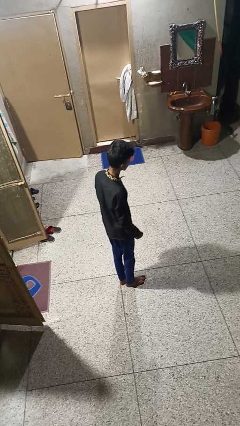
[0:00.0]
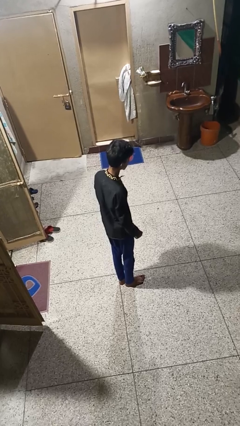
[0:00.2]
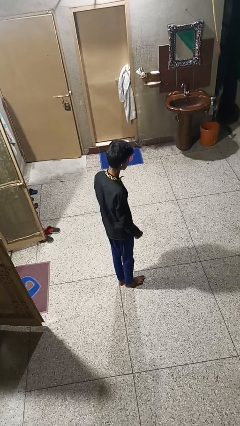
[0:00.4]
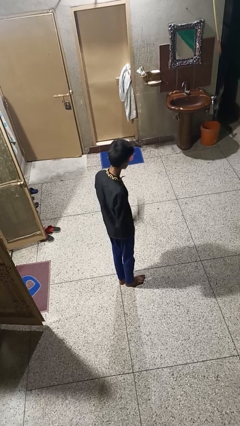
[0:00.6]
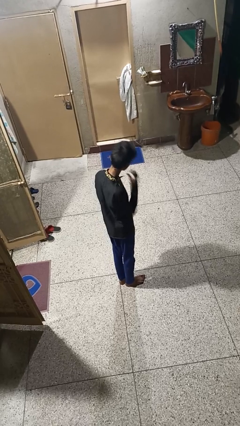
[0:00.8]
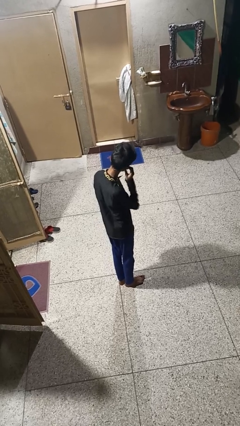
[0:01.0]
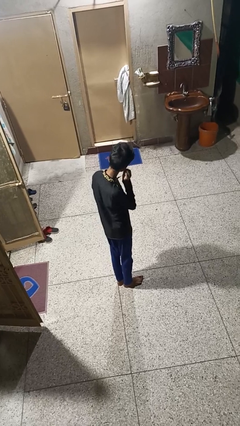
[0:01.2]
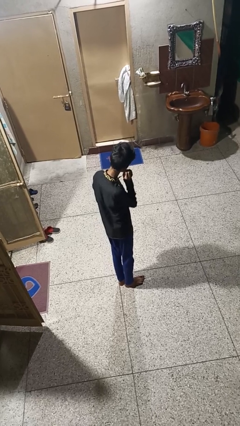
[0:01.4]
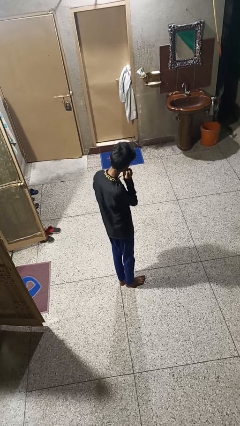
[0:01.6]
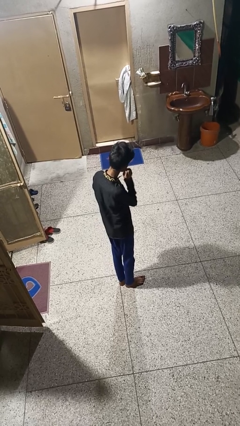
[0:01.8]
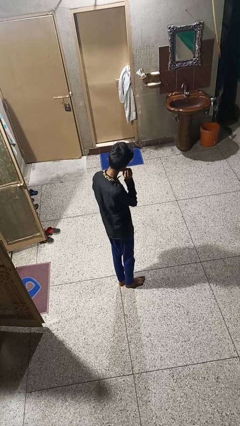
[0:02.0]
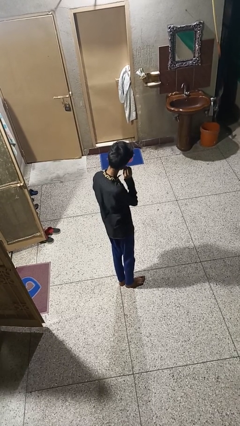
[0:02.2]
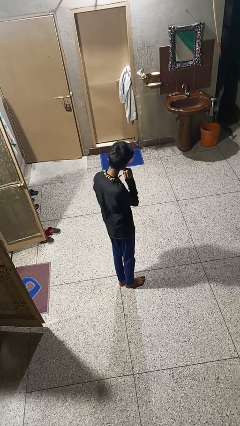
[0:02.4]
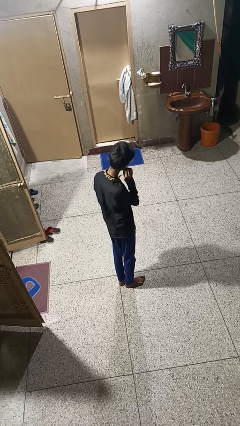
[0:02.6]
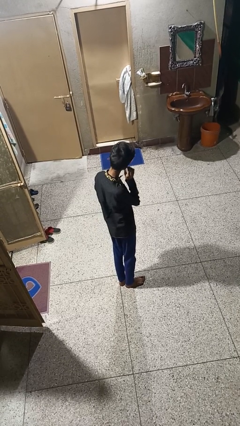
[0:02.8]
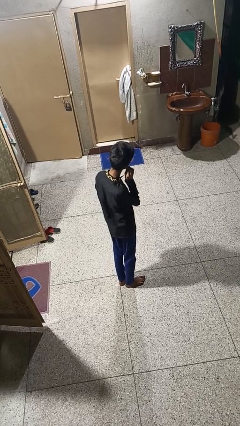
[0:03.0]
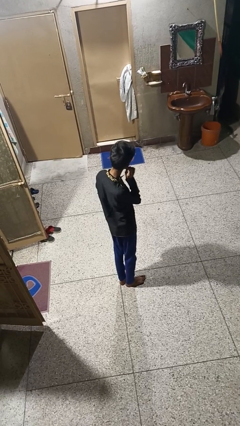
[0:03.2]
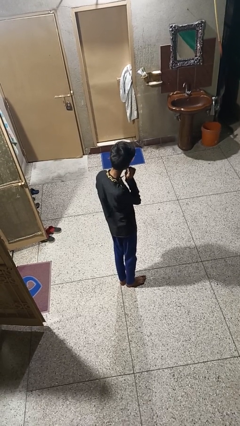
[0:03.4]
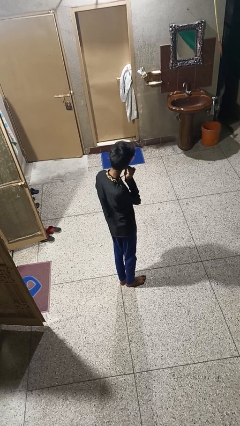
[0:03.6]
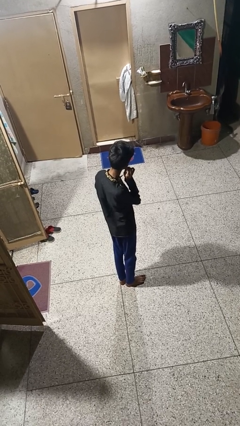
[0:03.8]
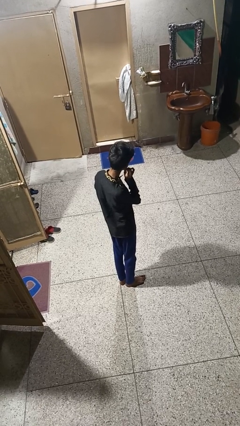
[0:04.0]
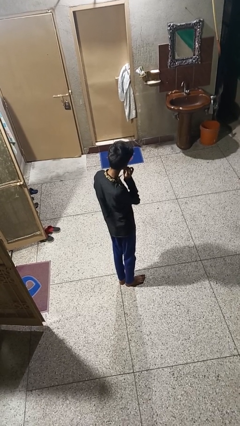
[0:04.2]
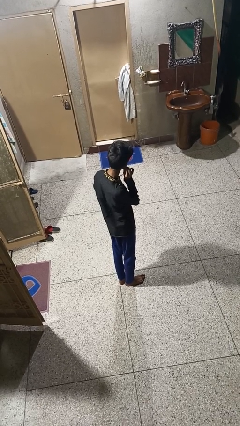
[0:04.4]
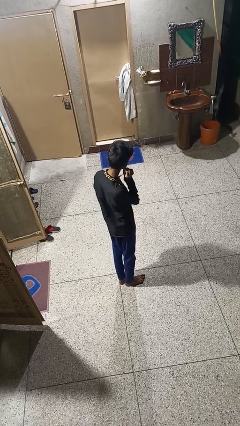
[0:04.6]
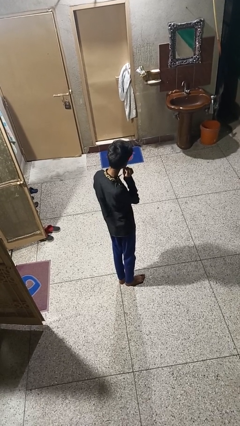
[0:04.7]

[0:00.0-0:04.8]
person touches earlobe

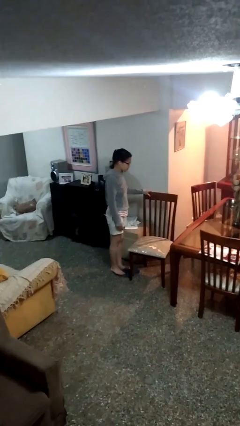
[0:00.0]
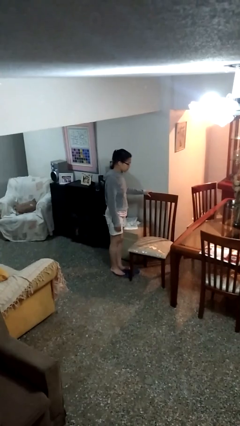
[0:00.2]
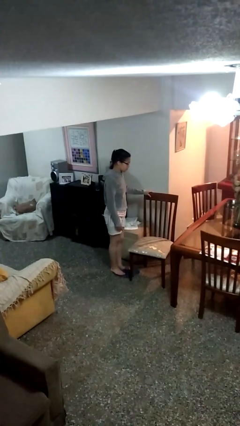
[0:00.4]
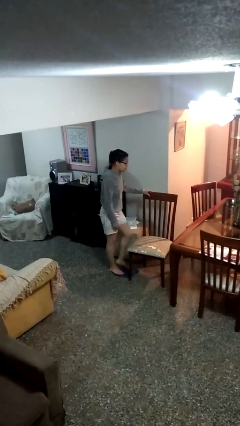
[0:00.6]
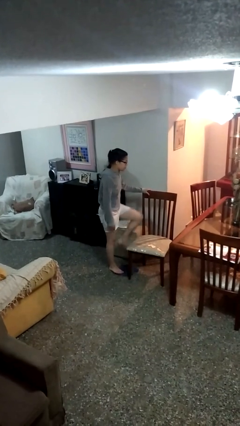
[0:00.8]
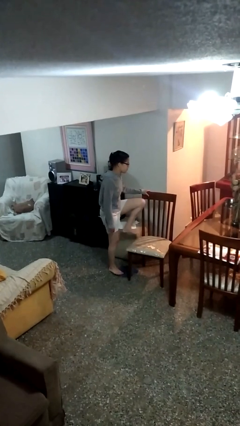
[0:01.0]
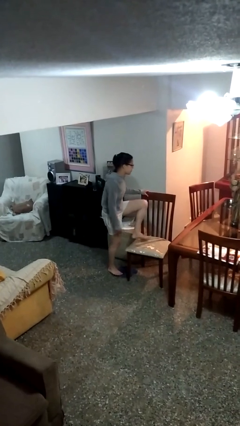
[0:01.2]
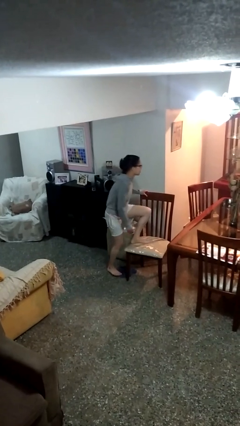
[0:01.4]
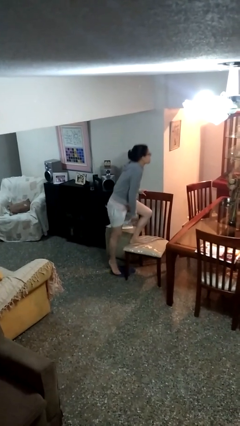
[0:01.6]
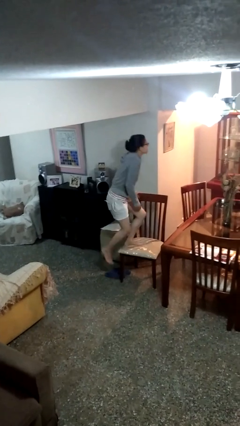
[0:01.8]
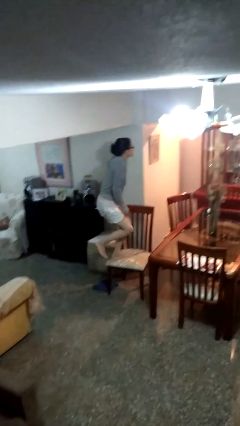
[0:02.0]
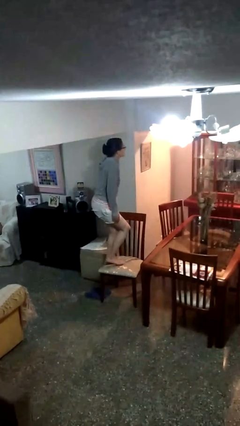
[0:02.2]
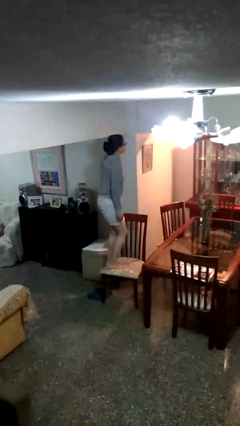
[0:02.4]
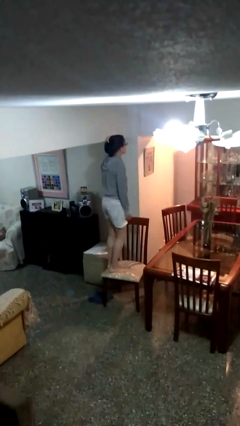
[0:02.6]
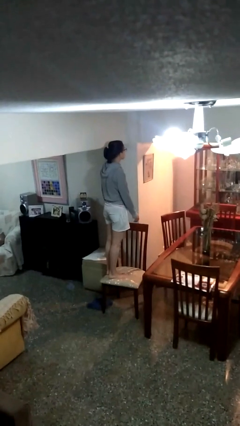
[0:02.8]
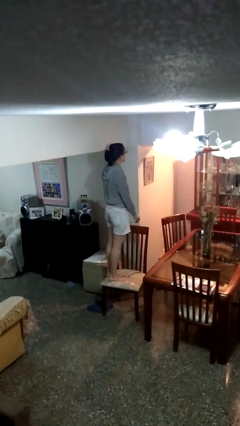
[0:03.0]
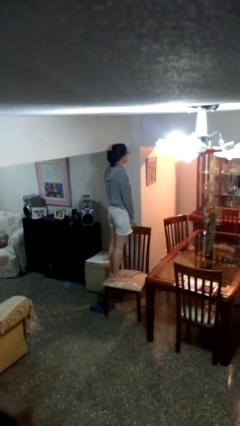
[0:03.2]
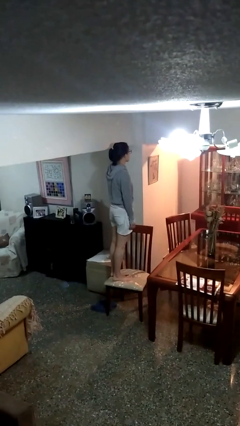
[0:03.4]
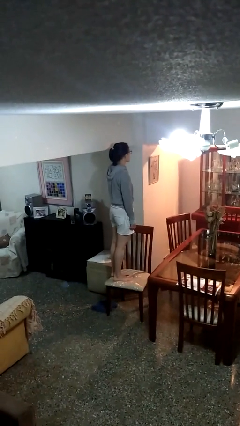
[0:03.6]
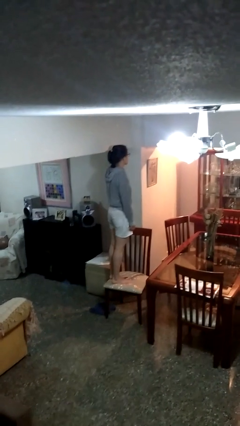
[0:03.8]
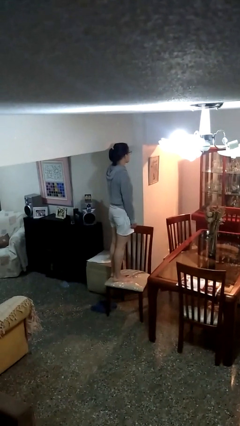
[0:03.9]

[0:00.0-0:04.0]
person climbs on chair

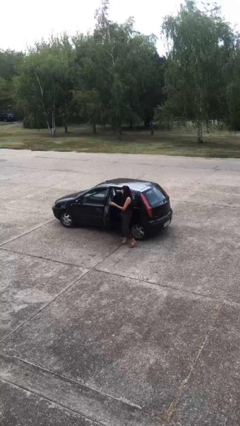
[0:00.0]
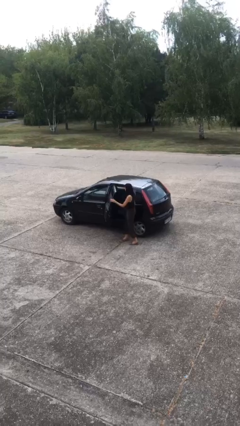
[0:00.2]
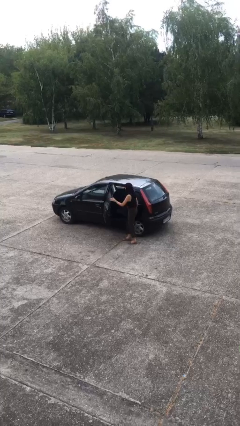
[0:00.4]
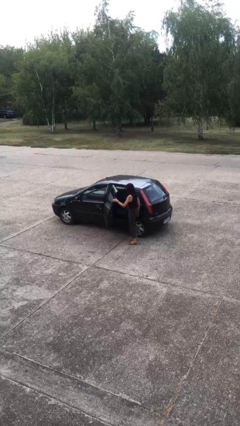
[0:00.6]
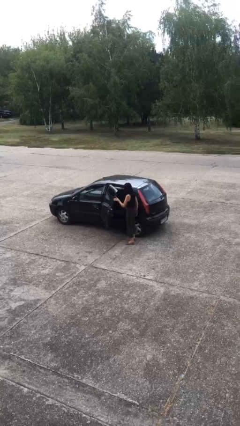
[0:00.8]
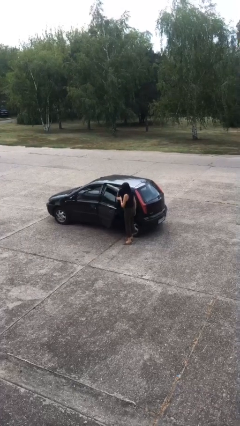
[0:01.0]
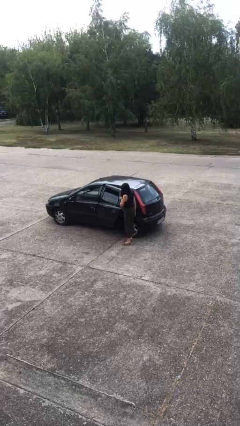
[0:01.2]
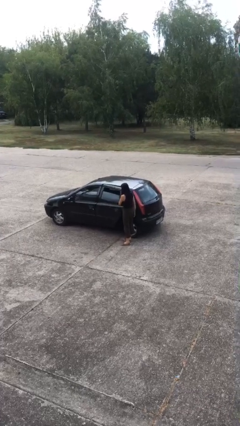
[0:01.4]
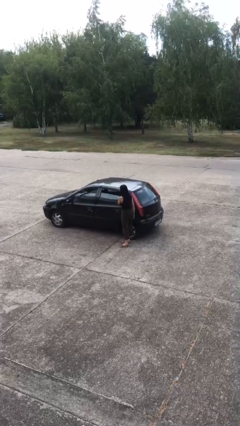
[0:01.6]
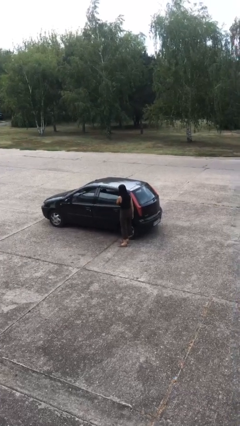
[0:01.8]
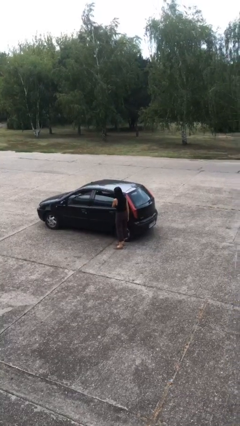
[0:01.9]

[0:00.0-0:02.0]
person closes car door

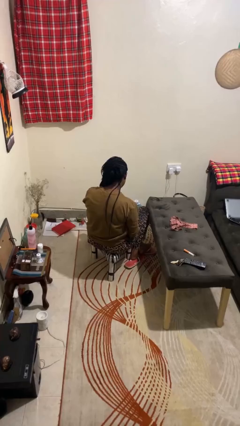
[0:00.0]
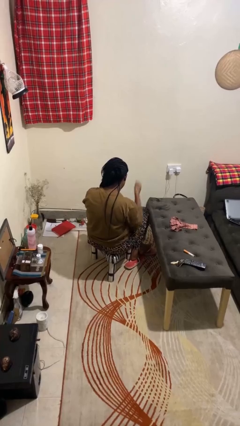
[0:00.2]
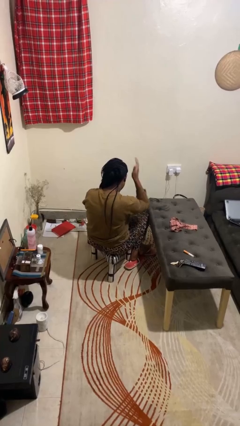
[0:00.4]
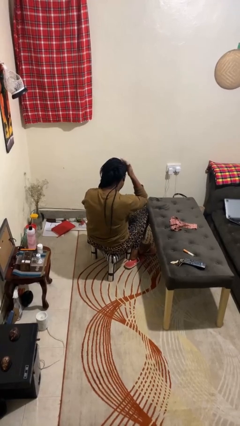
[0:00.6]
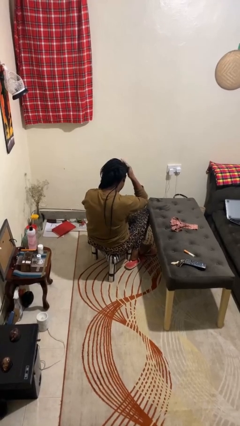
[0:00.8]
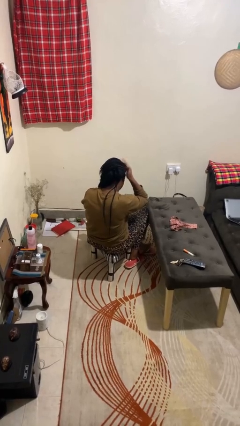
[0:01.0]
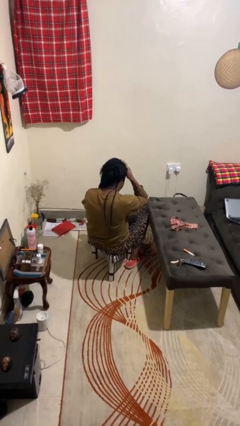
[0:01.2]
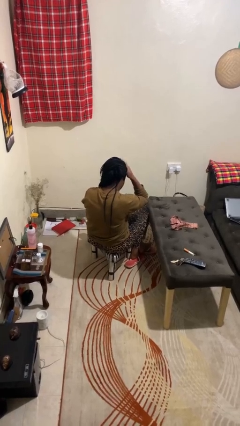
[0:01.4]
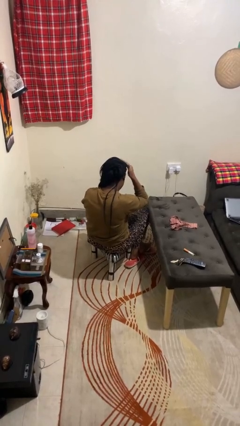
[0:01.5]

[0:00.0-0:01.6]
person pats head

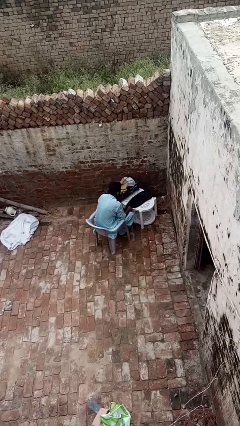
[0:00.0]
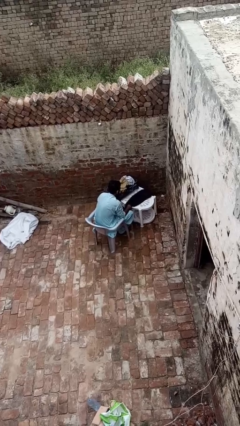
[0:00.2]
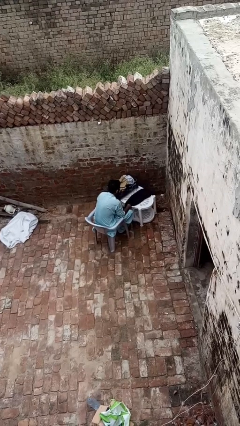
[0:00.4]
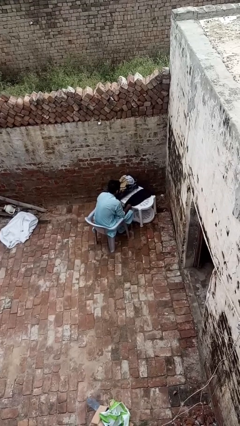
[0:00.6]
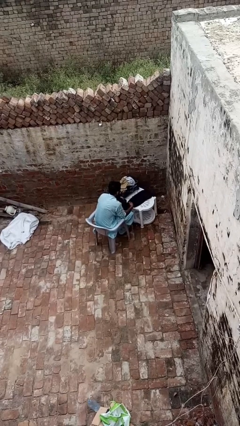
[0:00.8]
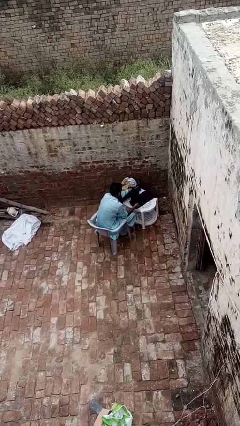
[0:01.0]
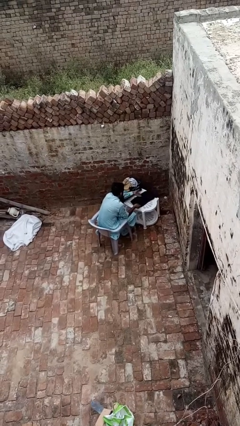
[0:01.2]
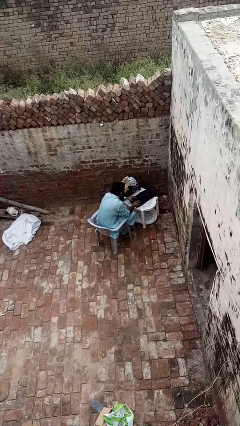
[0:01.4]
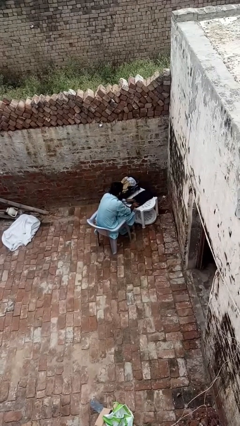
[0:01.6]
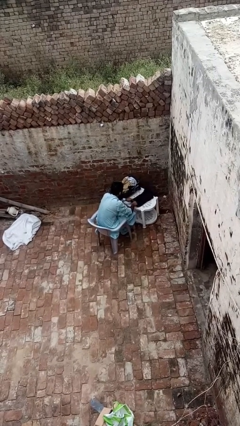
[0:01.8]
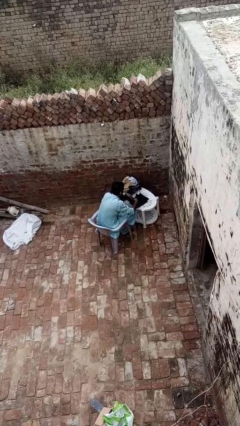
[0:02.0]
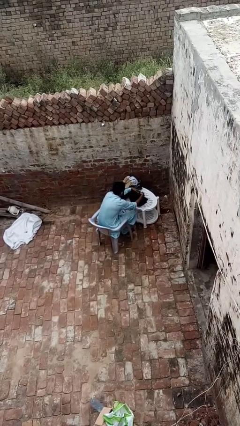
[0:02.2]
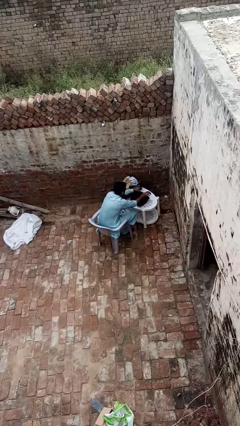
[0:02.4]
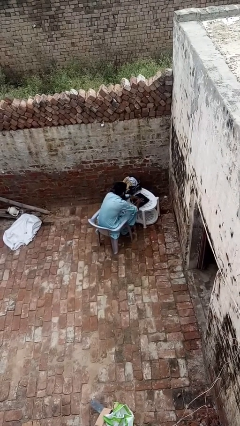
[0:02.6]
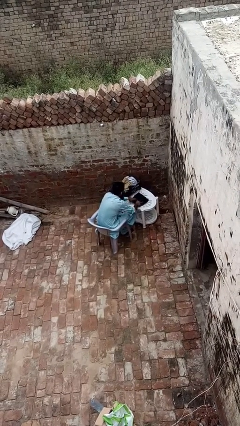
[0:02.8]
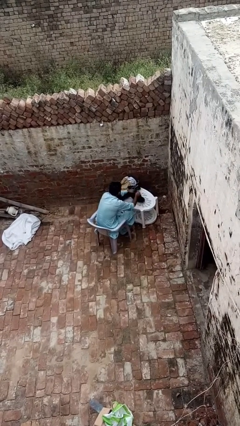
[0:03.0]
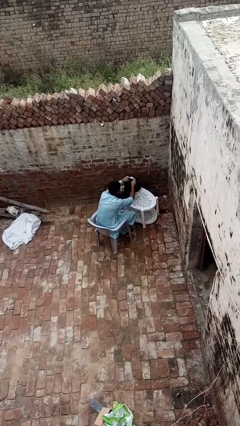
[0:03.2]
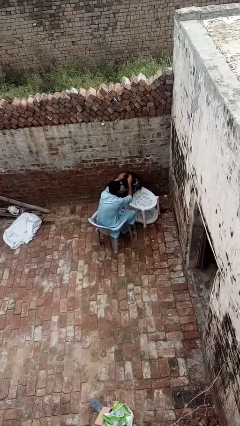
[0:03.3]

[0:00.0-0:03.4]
person folds pants

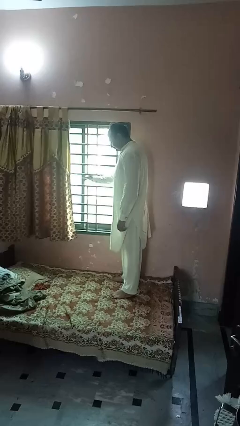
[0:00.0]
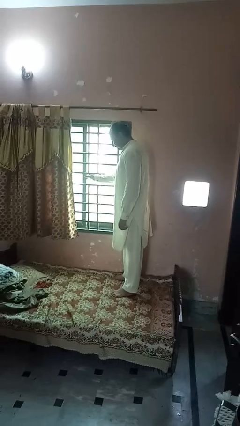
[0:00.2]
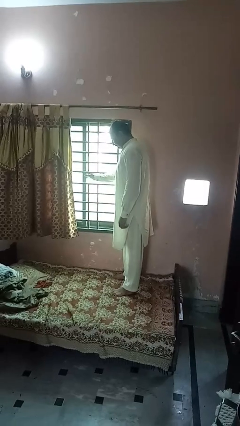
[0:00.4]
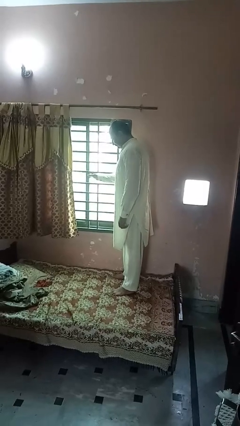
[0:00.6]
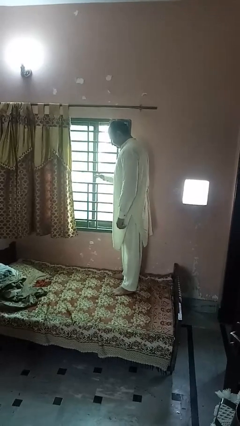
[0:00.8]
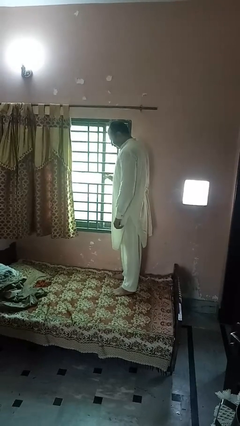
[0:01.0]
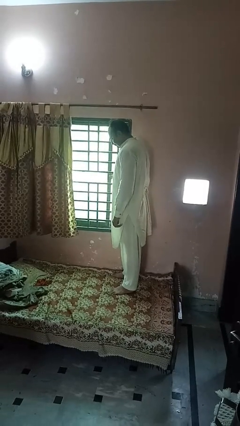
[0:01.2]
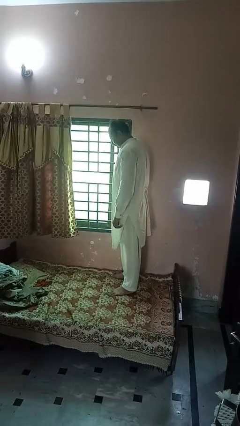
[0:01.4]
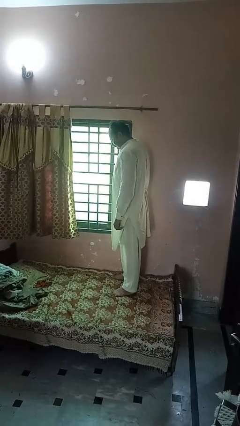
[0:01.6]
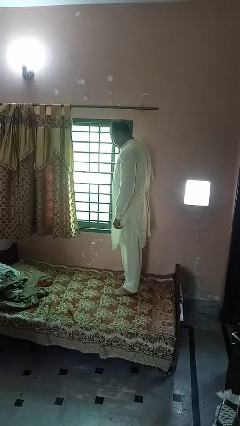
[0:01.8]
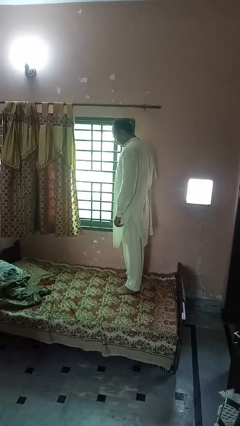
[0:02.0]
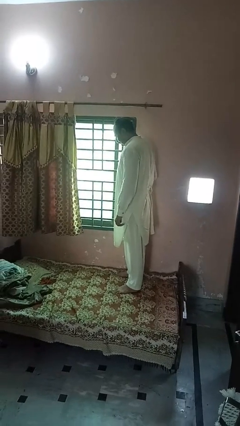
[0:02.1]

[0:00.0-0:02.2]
person closes home window
